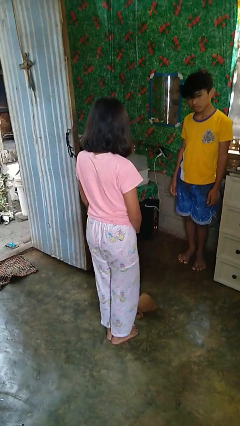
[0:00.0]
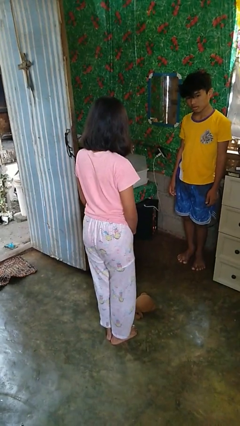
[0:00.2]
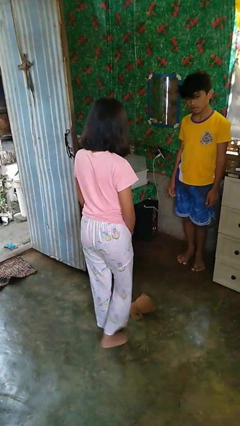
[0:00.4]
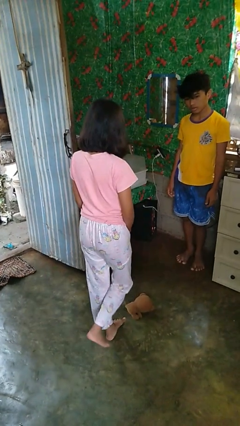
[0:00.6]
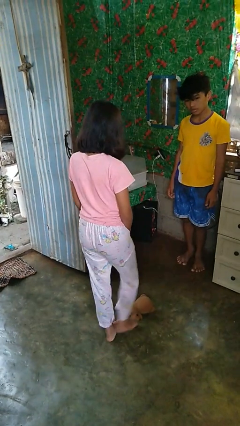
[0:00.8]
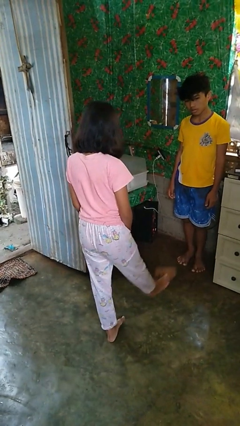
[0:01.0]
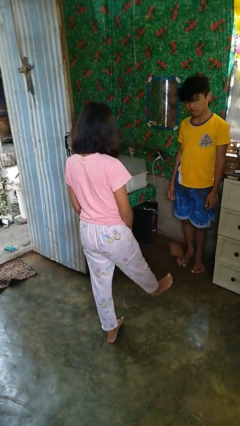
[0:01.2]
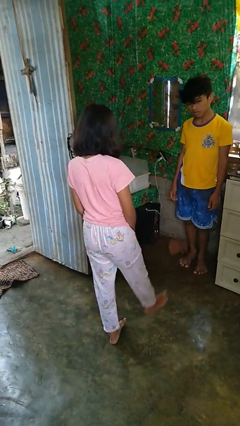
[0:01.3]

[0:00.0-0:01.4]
person kicks object to person

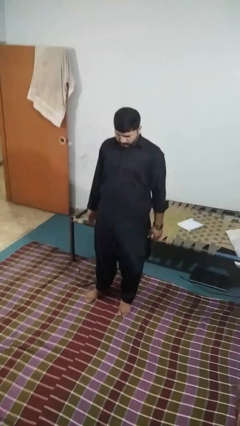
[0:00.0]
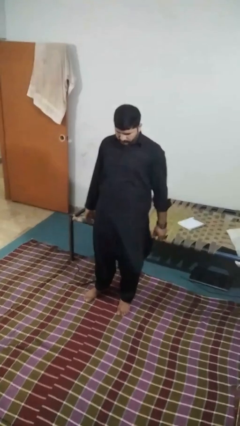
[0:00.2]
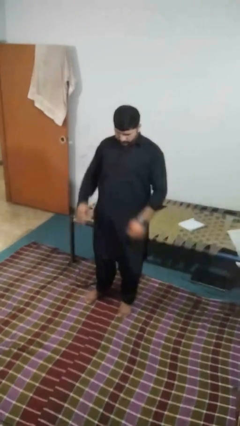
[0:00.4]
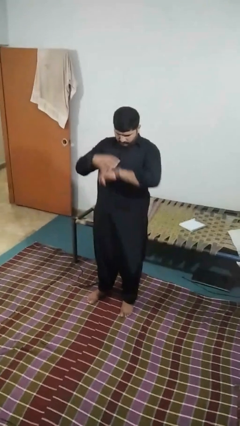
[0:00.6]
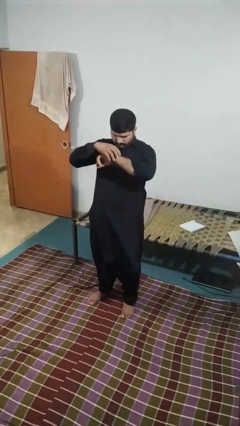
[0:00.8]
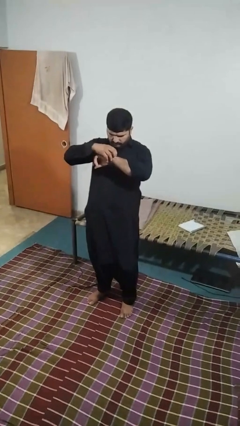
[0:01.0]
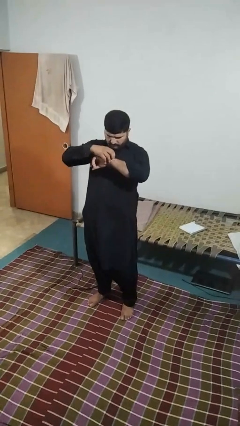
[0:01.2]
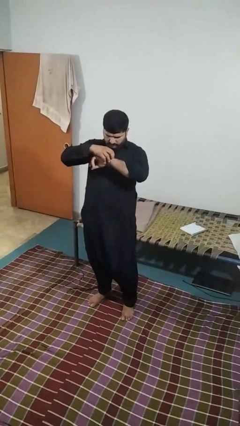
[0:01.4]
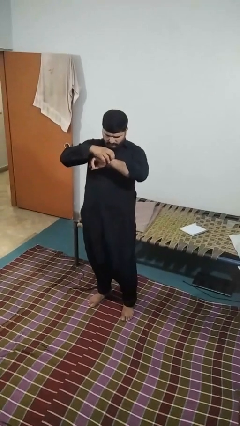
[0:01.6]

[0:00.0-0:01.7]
person looks at wristwatch

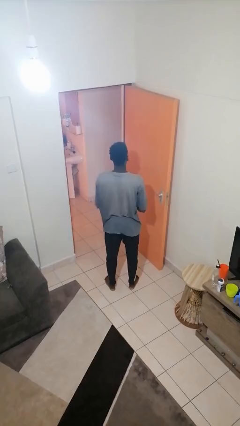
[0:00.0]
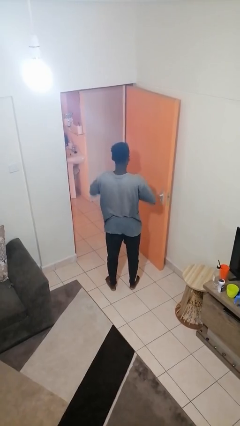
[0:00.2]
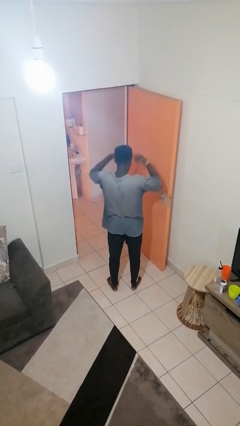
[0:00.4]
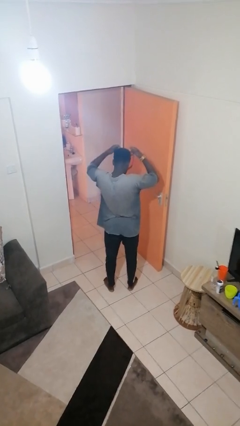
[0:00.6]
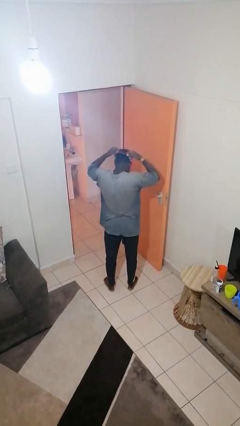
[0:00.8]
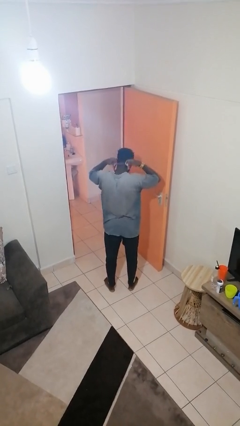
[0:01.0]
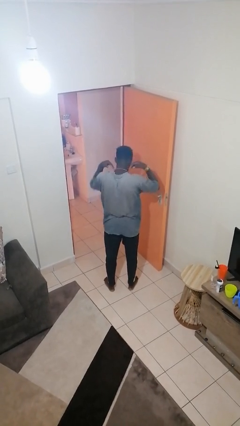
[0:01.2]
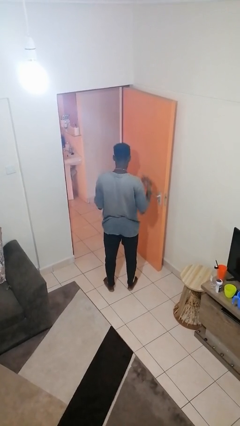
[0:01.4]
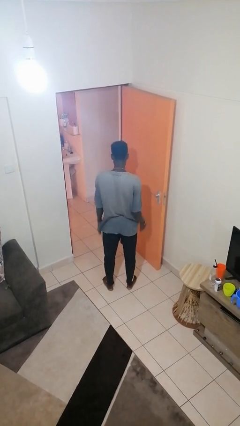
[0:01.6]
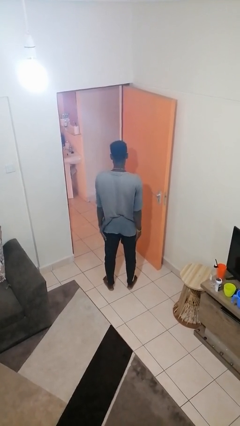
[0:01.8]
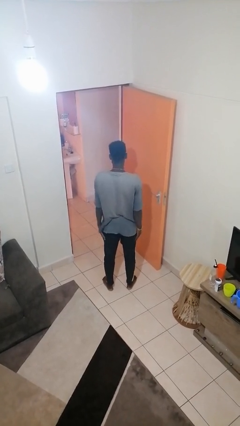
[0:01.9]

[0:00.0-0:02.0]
person puts on necklace

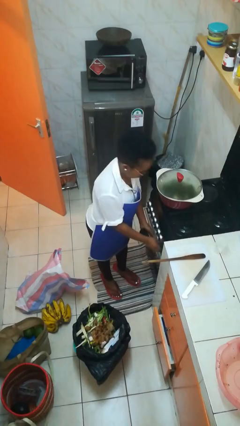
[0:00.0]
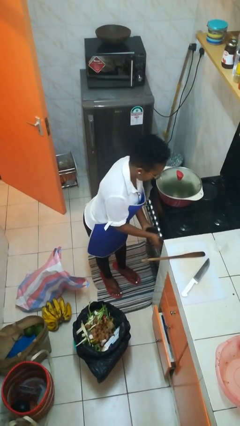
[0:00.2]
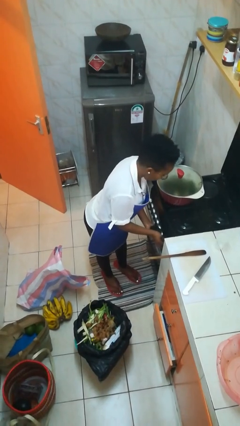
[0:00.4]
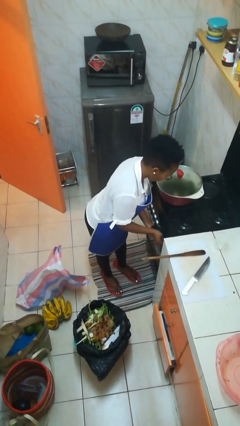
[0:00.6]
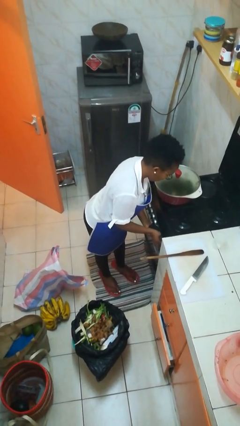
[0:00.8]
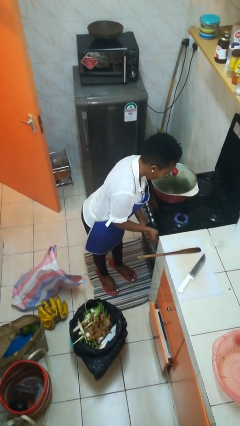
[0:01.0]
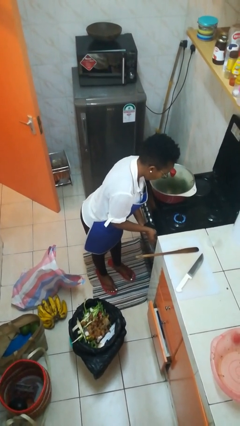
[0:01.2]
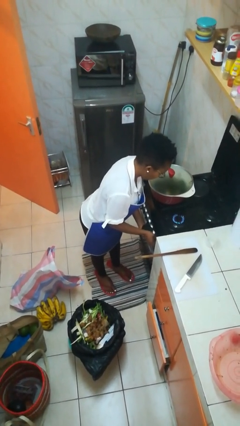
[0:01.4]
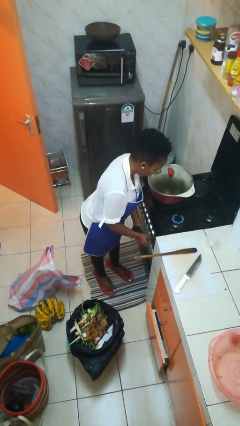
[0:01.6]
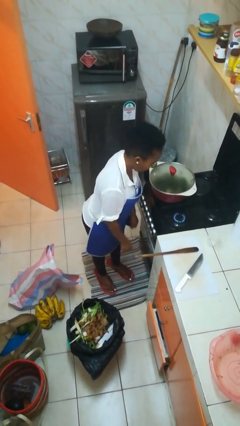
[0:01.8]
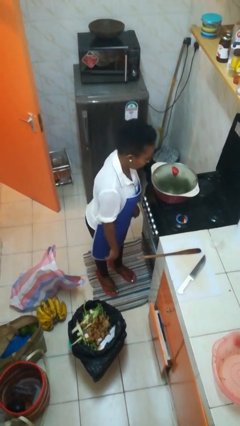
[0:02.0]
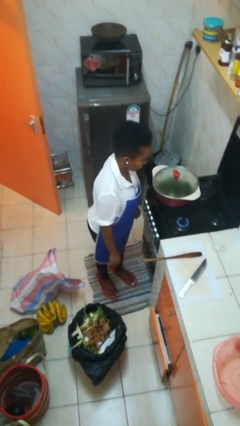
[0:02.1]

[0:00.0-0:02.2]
person turns on stovetop

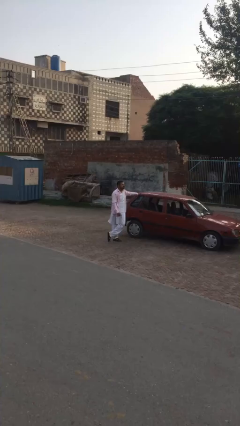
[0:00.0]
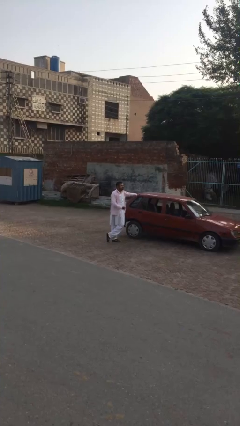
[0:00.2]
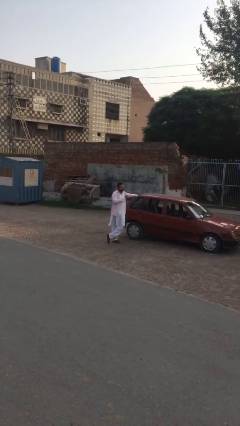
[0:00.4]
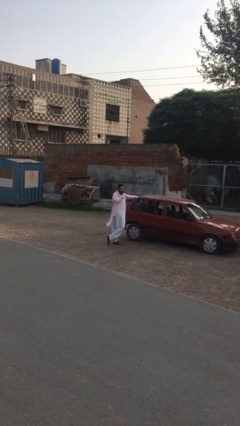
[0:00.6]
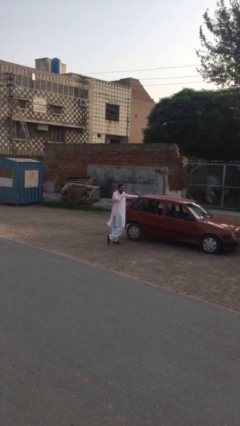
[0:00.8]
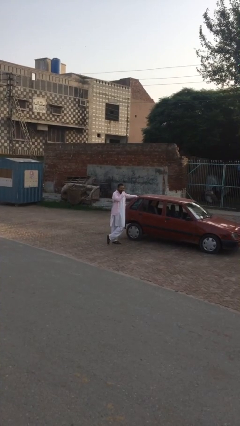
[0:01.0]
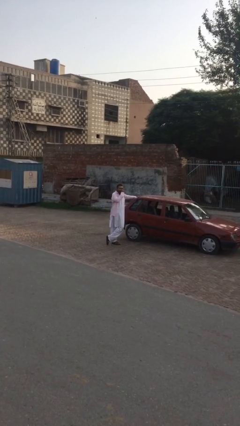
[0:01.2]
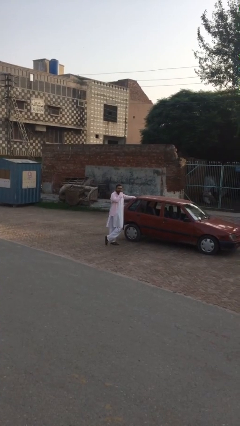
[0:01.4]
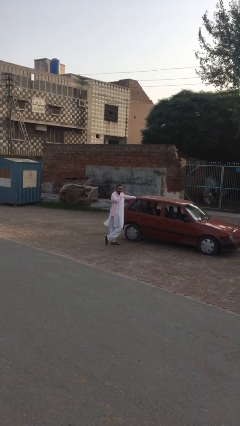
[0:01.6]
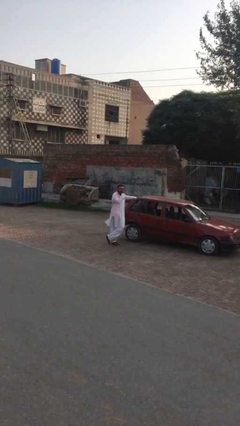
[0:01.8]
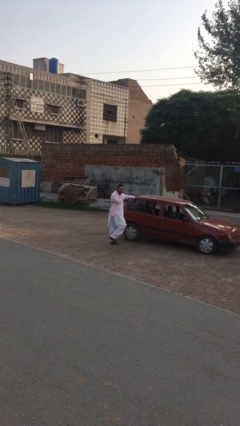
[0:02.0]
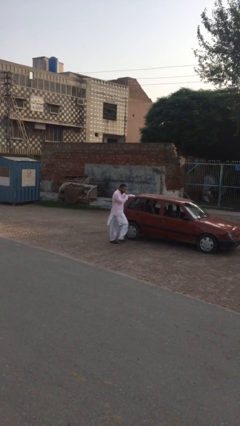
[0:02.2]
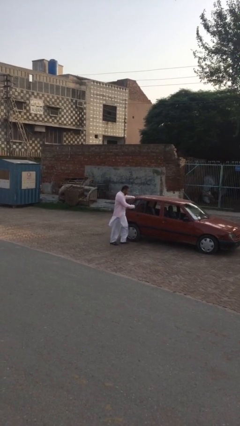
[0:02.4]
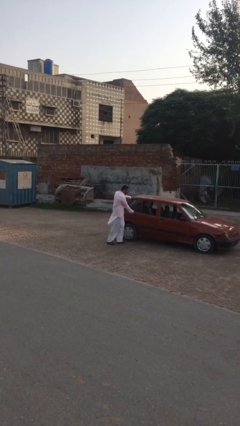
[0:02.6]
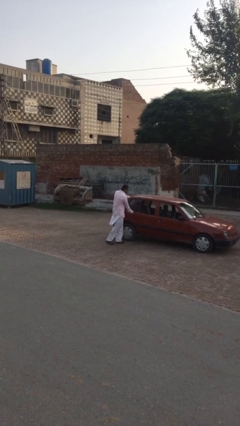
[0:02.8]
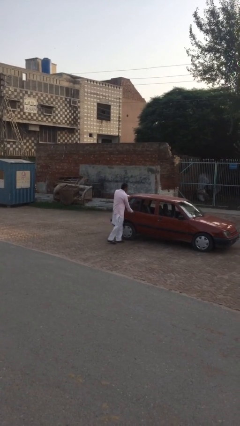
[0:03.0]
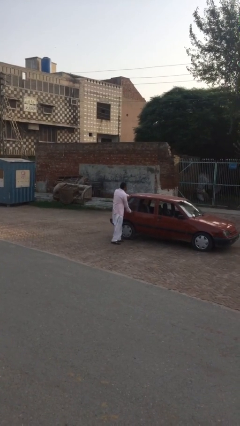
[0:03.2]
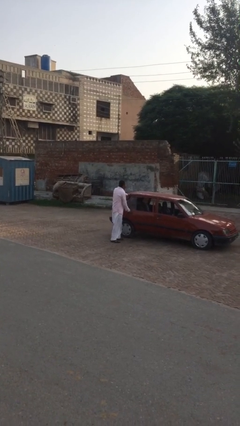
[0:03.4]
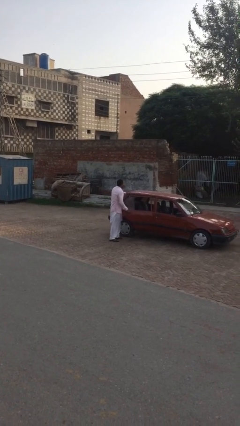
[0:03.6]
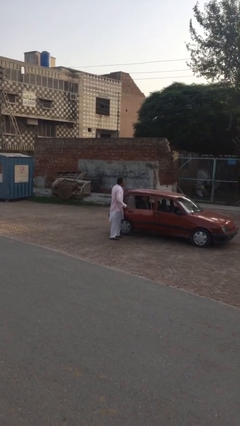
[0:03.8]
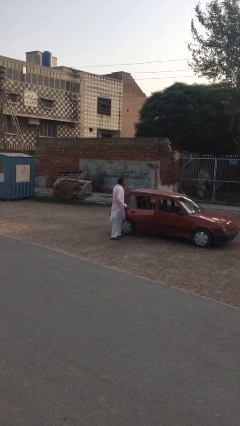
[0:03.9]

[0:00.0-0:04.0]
person opens car door

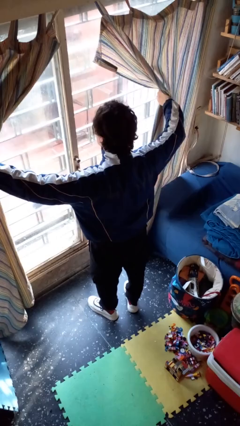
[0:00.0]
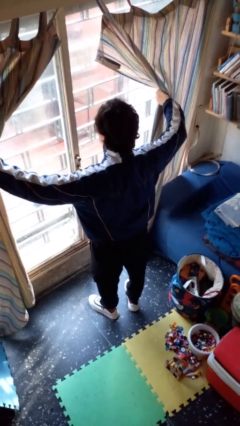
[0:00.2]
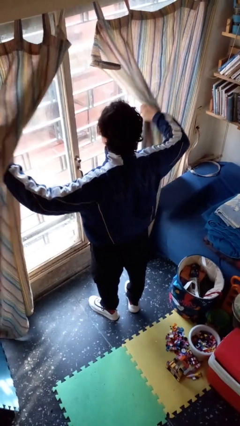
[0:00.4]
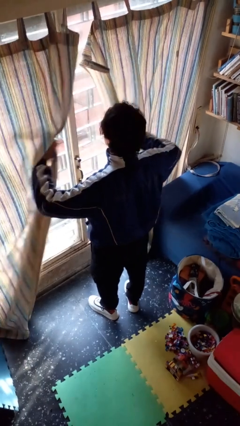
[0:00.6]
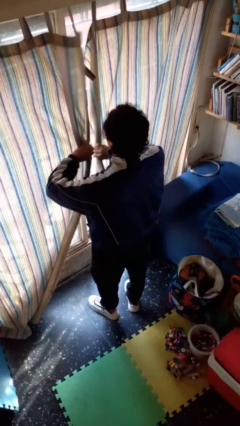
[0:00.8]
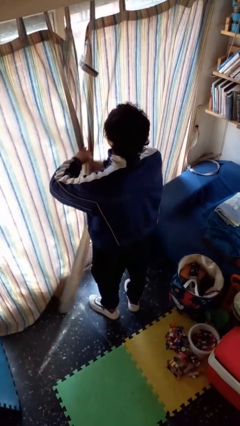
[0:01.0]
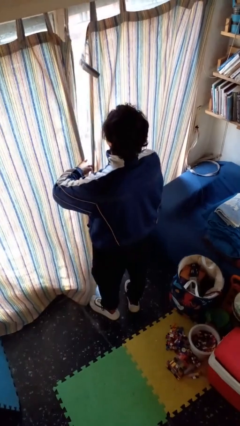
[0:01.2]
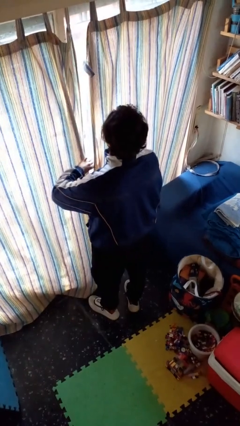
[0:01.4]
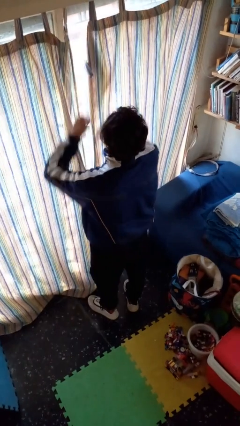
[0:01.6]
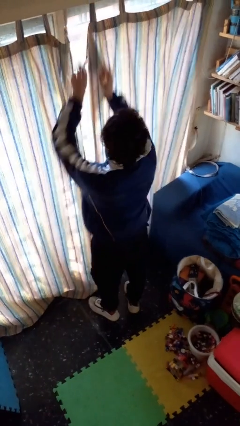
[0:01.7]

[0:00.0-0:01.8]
person closes curtains

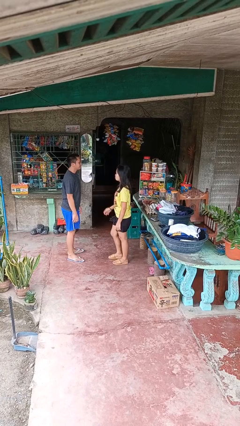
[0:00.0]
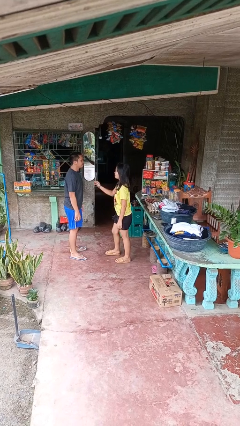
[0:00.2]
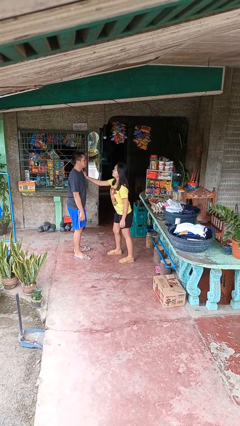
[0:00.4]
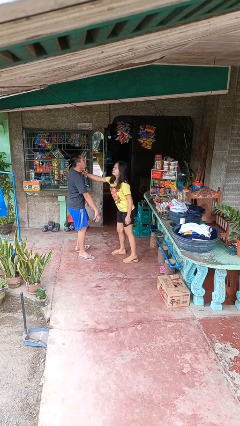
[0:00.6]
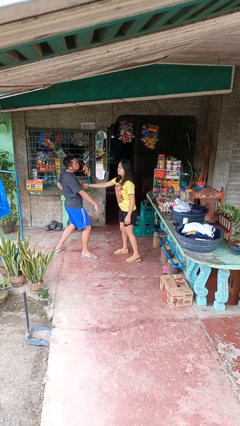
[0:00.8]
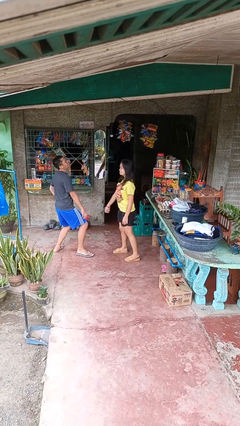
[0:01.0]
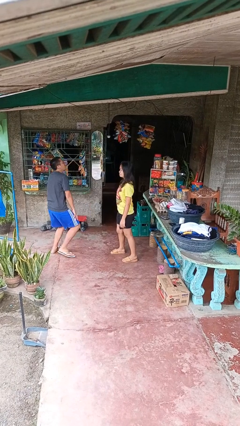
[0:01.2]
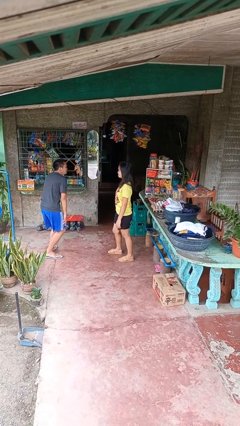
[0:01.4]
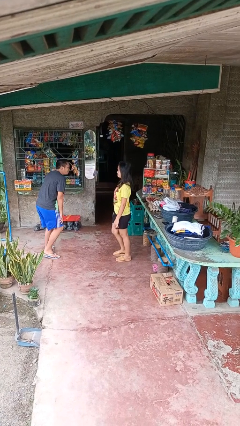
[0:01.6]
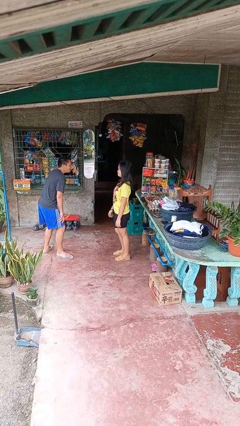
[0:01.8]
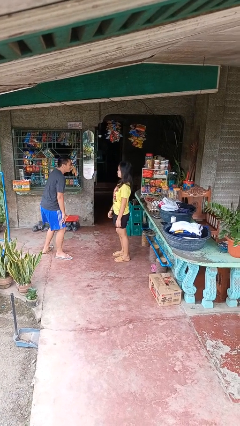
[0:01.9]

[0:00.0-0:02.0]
person shoves person

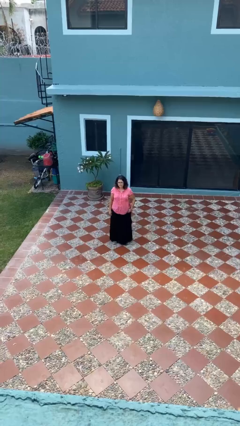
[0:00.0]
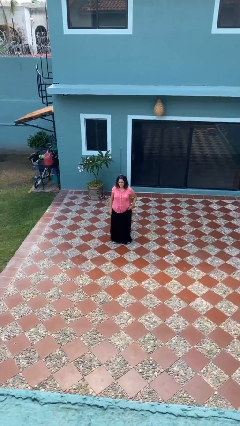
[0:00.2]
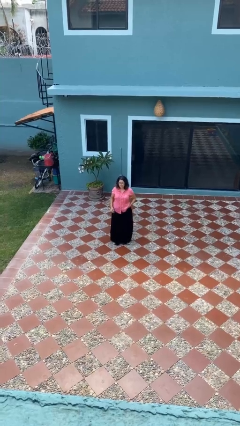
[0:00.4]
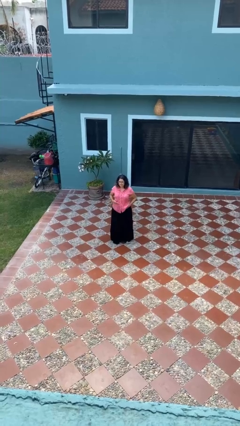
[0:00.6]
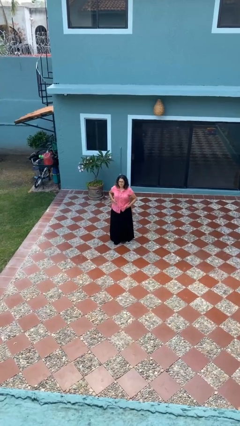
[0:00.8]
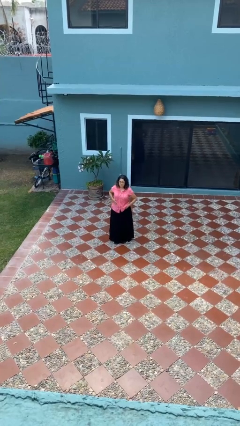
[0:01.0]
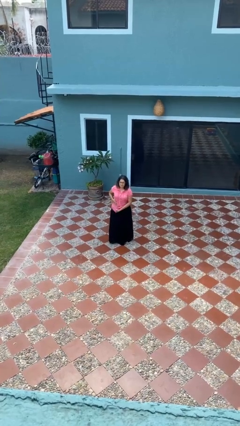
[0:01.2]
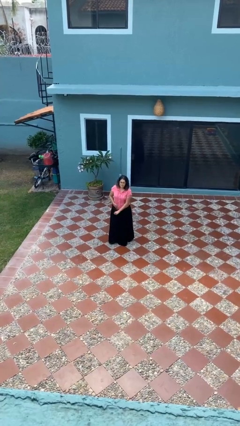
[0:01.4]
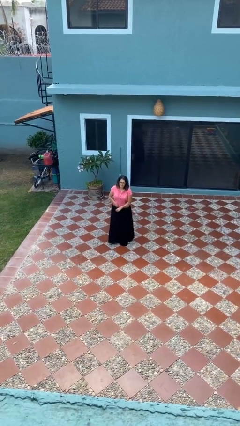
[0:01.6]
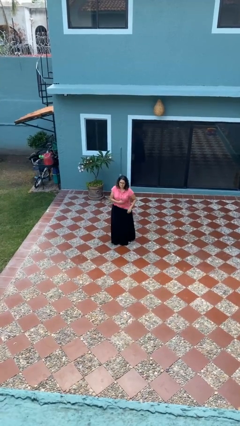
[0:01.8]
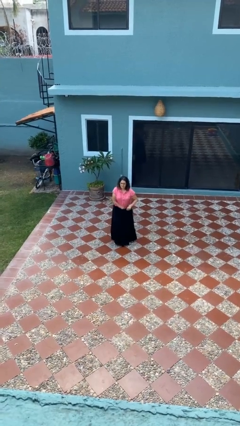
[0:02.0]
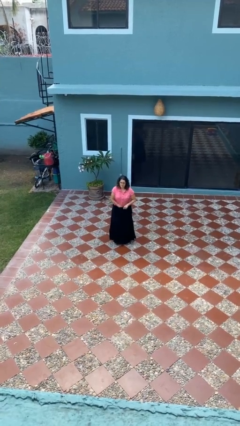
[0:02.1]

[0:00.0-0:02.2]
person tucks in shirt
